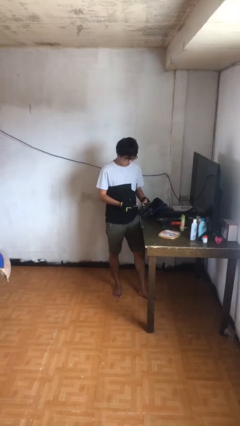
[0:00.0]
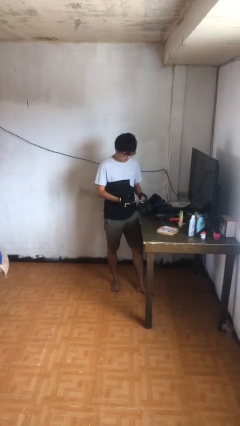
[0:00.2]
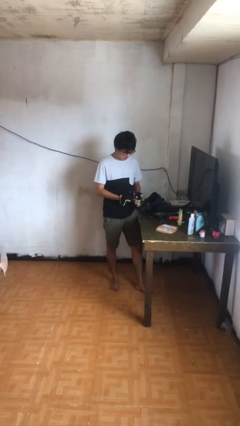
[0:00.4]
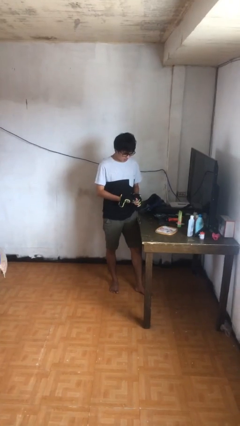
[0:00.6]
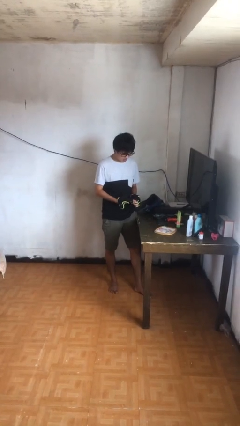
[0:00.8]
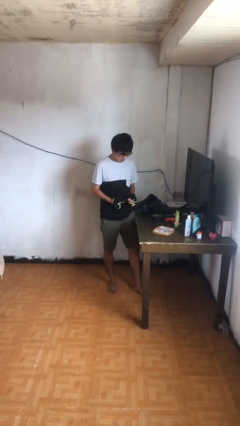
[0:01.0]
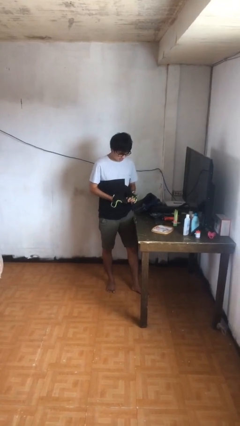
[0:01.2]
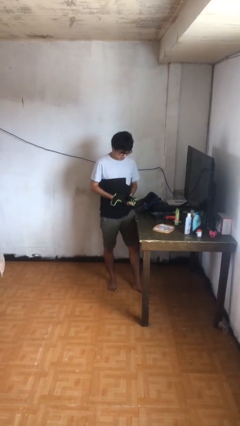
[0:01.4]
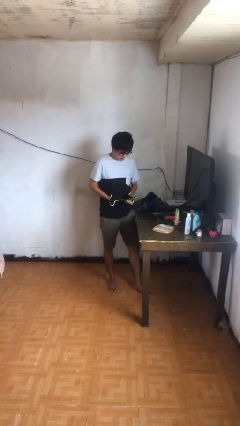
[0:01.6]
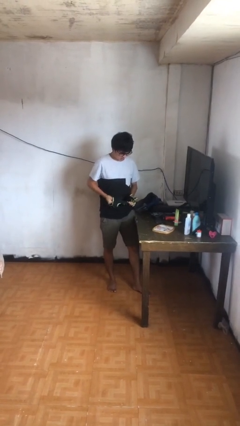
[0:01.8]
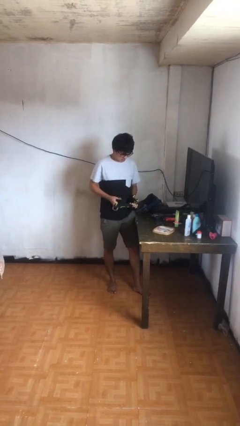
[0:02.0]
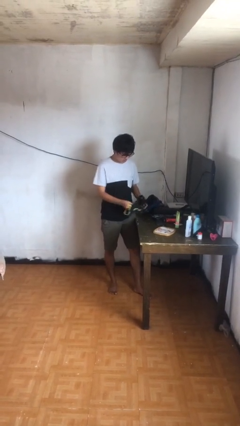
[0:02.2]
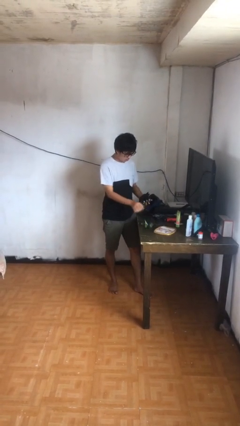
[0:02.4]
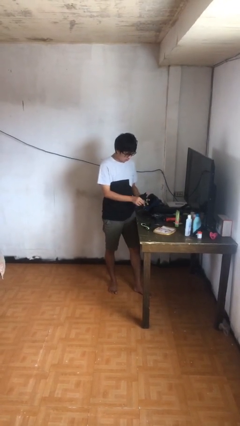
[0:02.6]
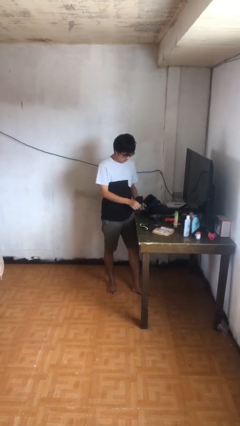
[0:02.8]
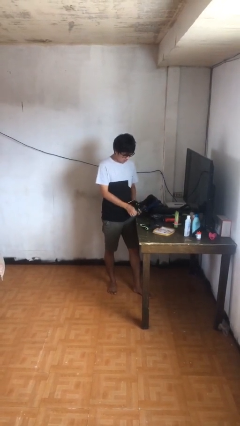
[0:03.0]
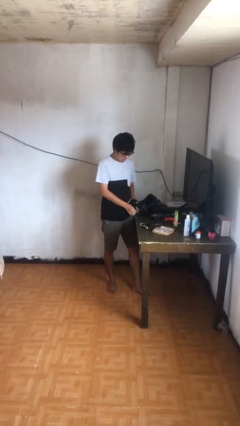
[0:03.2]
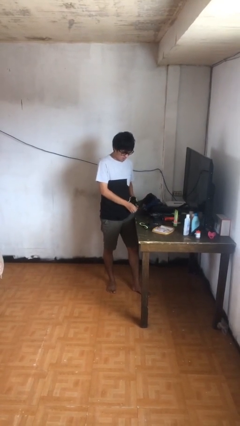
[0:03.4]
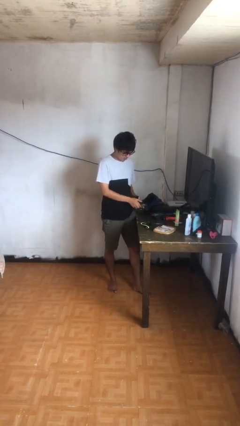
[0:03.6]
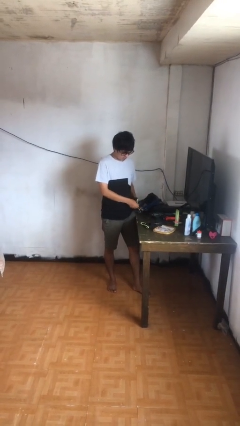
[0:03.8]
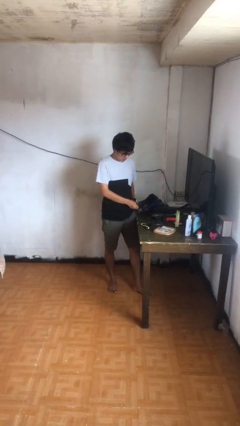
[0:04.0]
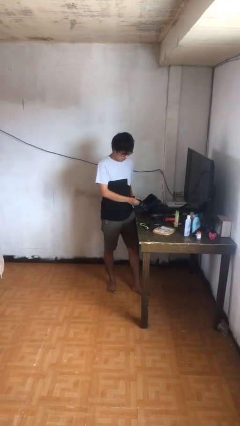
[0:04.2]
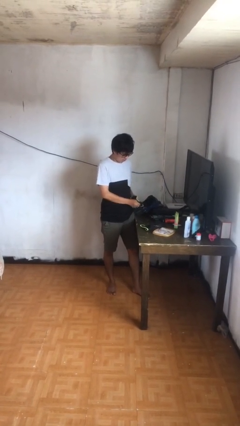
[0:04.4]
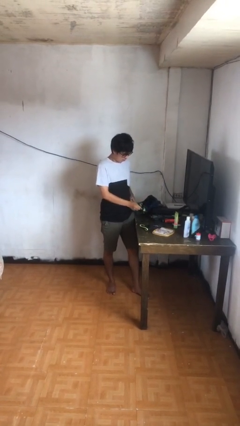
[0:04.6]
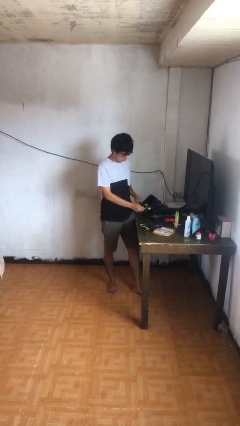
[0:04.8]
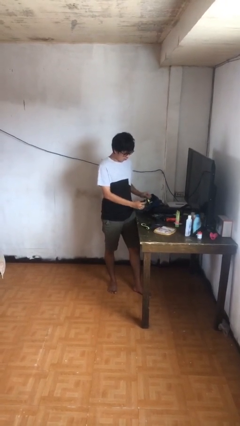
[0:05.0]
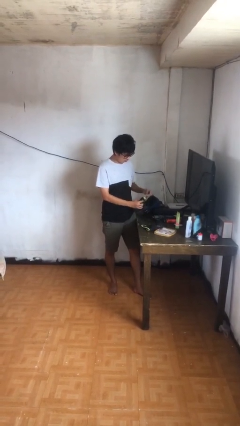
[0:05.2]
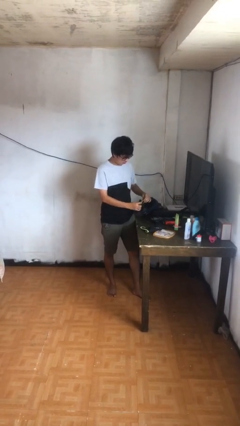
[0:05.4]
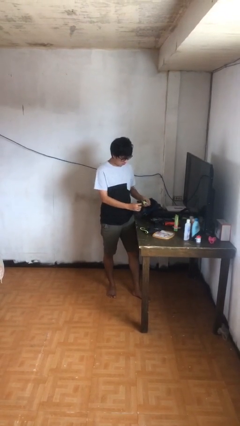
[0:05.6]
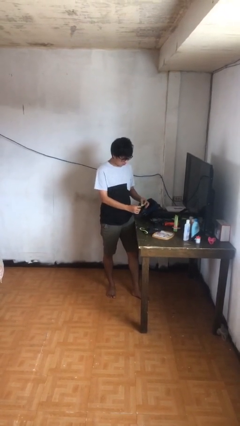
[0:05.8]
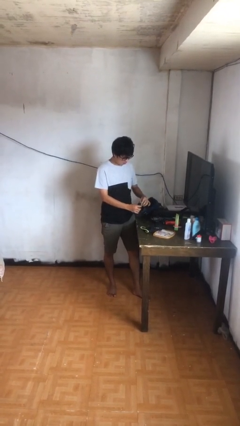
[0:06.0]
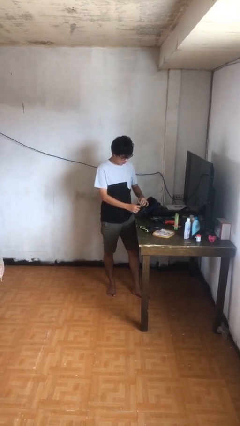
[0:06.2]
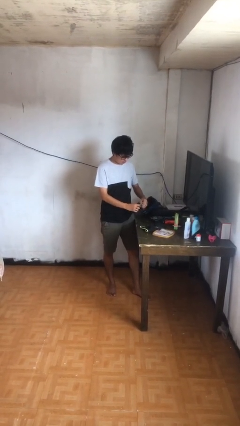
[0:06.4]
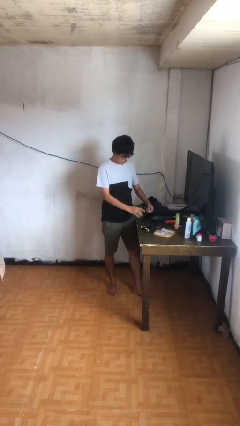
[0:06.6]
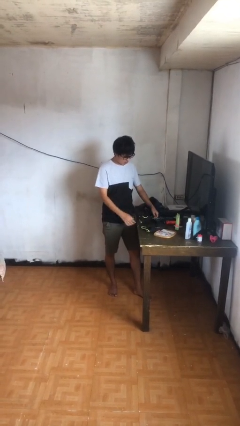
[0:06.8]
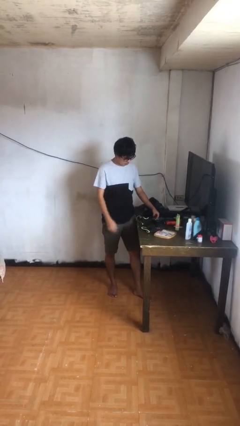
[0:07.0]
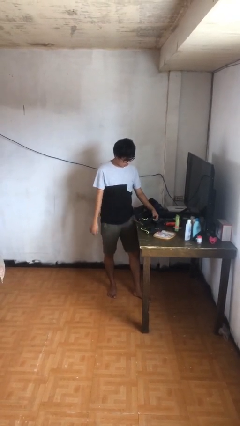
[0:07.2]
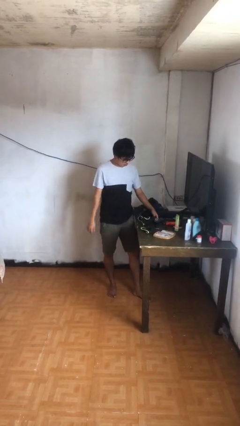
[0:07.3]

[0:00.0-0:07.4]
person takes off gloves

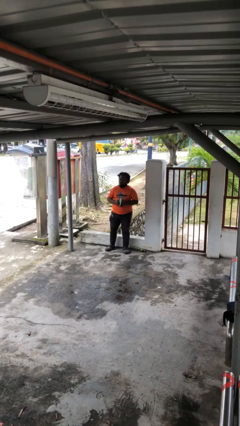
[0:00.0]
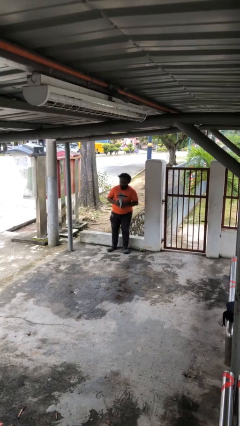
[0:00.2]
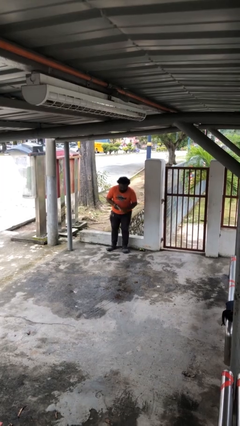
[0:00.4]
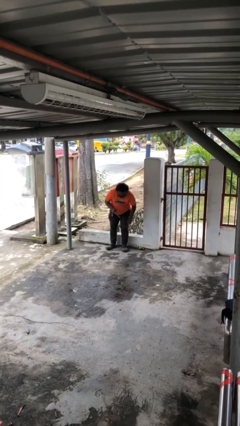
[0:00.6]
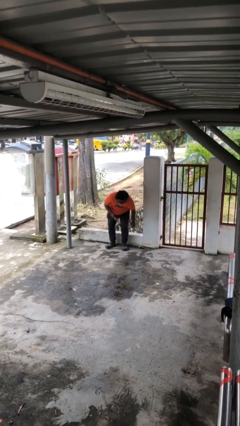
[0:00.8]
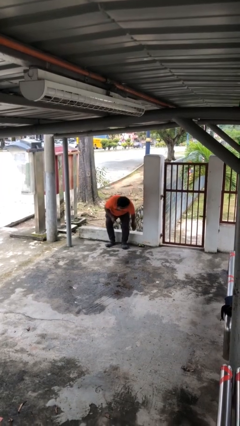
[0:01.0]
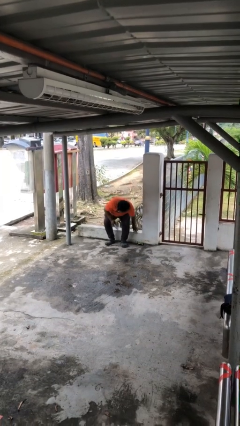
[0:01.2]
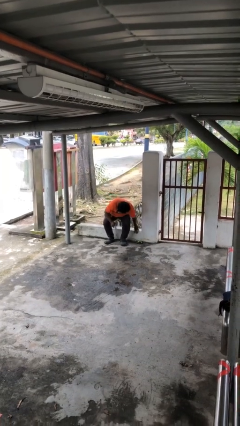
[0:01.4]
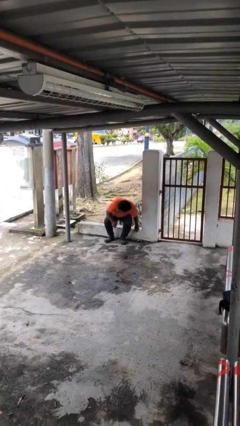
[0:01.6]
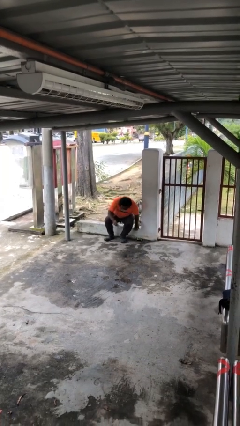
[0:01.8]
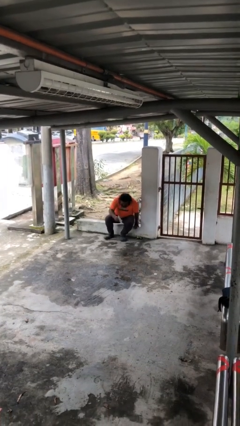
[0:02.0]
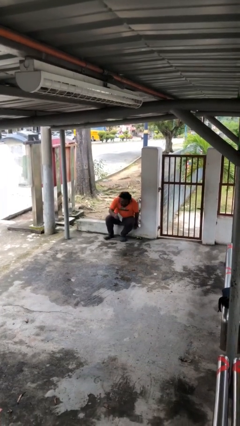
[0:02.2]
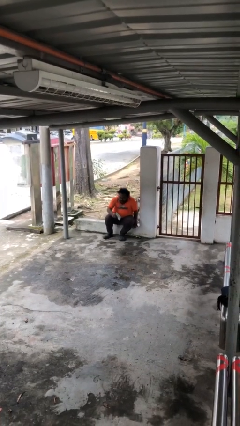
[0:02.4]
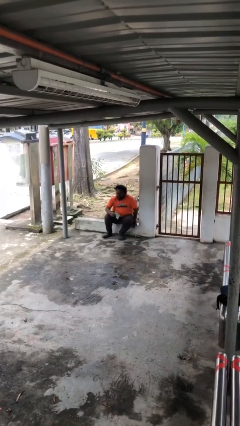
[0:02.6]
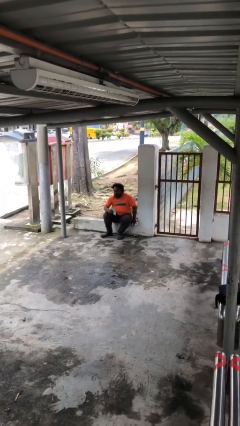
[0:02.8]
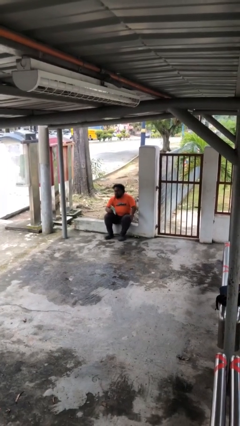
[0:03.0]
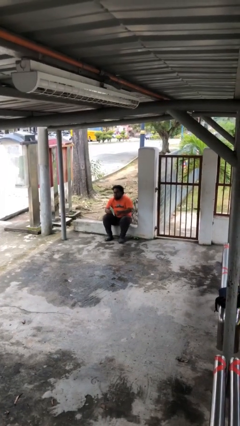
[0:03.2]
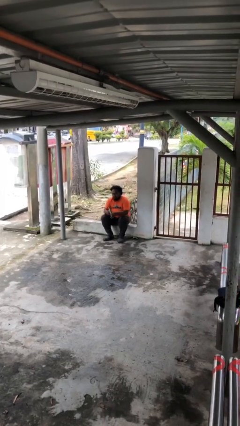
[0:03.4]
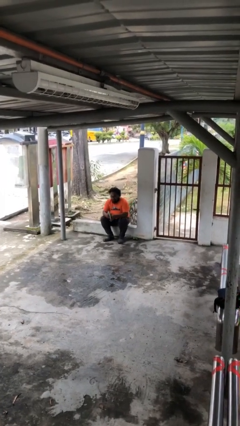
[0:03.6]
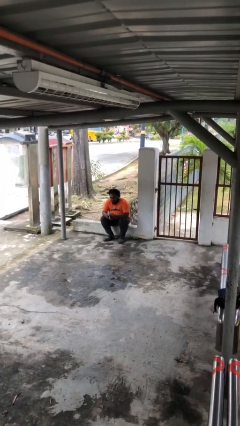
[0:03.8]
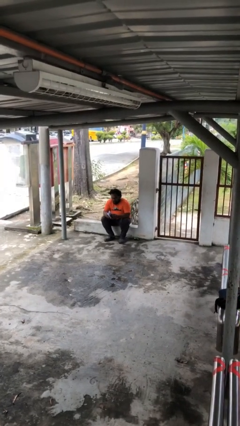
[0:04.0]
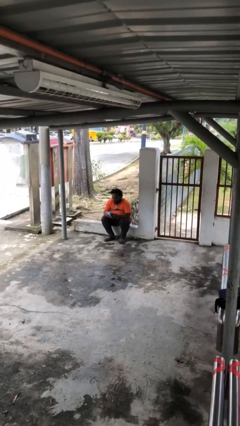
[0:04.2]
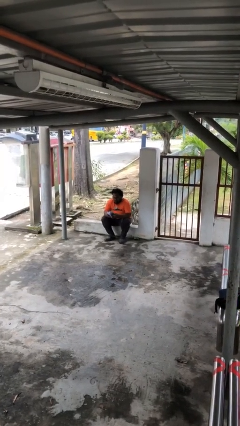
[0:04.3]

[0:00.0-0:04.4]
person sits down

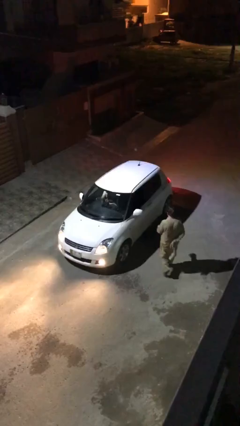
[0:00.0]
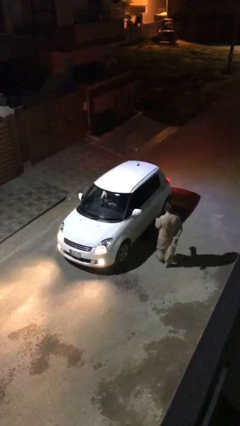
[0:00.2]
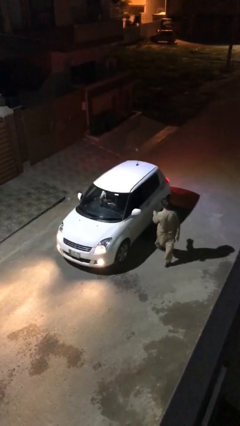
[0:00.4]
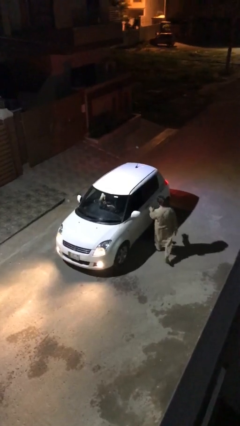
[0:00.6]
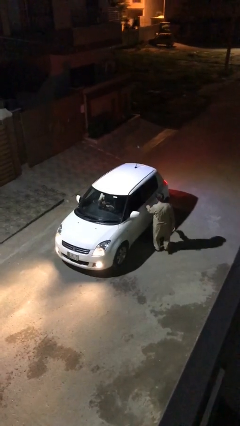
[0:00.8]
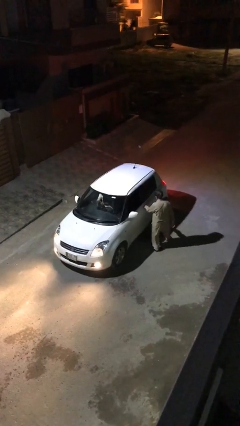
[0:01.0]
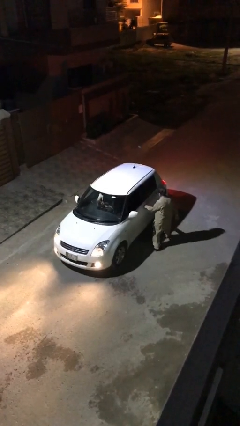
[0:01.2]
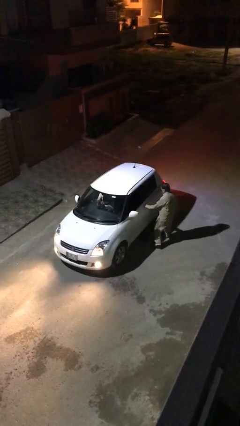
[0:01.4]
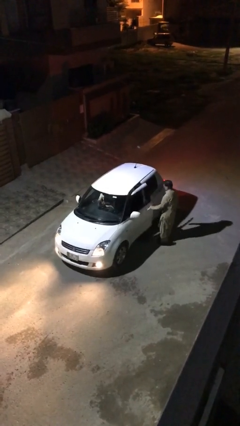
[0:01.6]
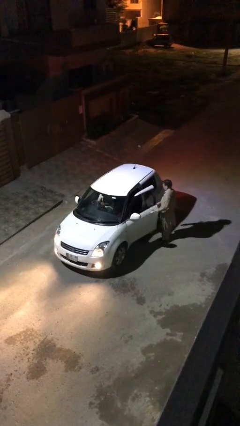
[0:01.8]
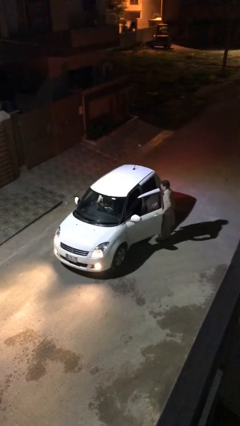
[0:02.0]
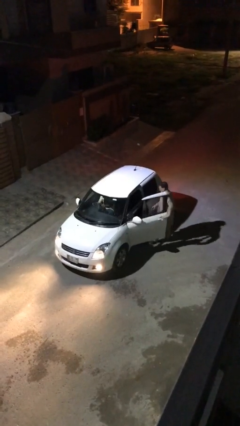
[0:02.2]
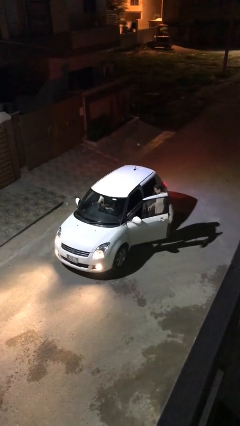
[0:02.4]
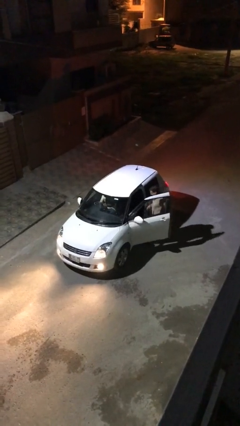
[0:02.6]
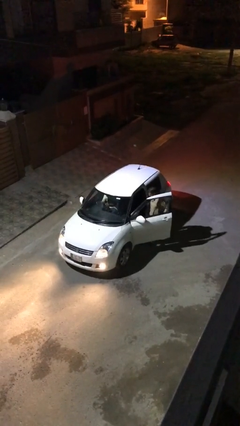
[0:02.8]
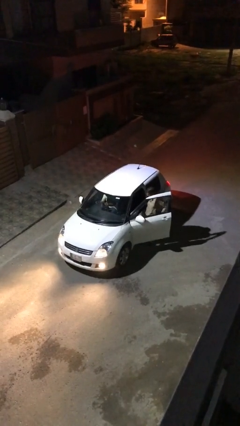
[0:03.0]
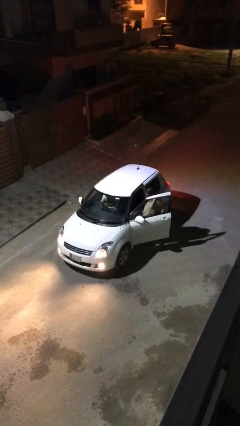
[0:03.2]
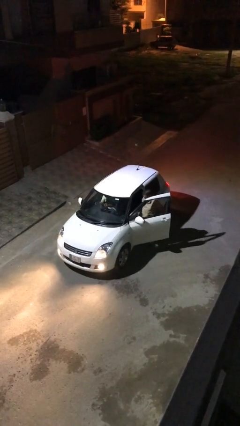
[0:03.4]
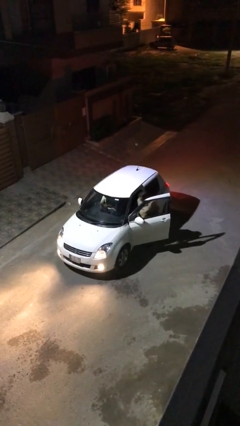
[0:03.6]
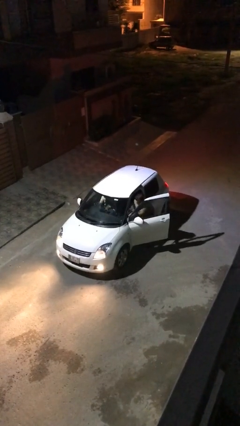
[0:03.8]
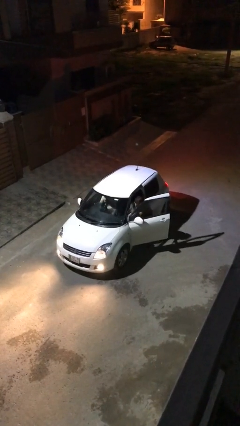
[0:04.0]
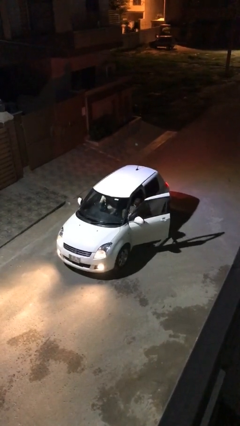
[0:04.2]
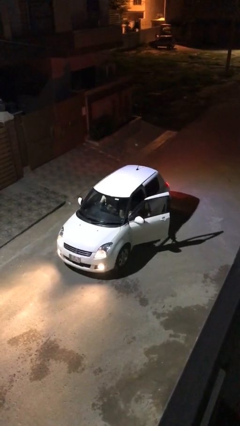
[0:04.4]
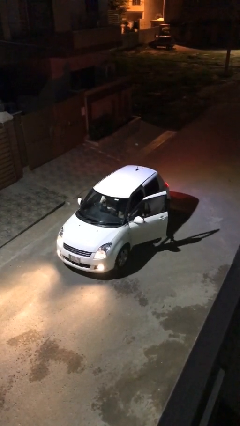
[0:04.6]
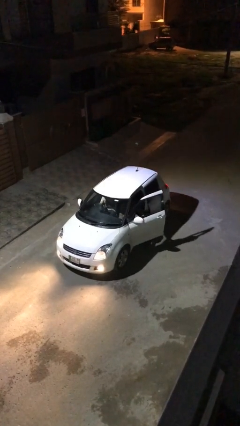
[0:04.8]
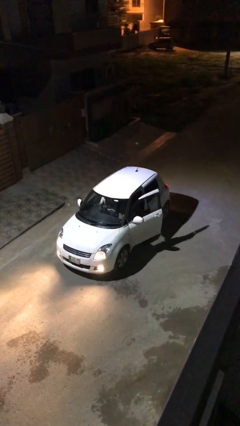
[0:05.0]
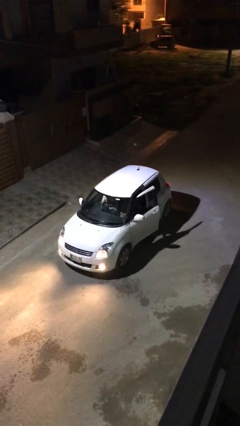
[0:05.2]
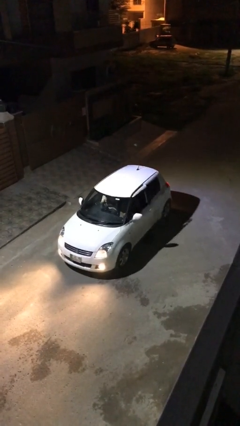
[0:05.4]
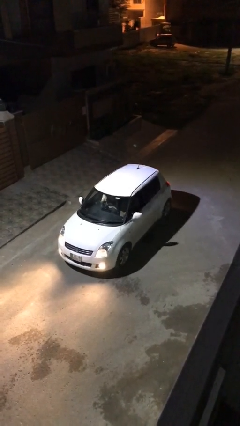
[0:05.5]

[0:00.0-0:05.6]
car picks up person

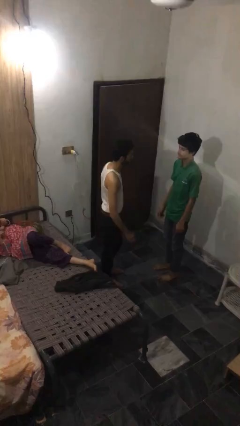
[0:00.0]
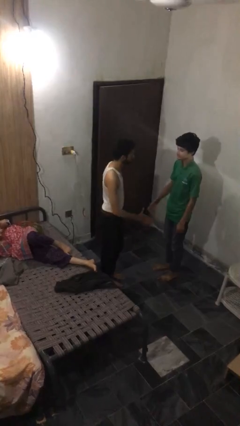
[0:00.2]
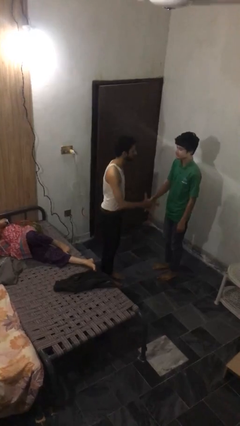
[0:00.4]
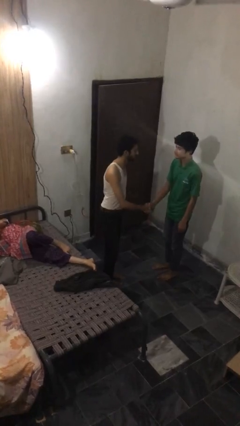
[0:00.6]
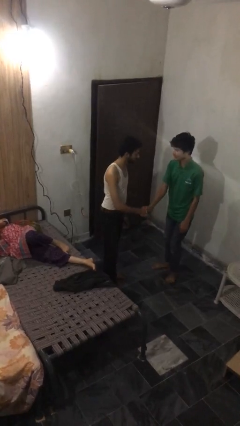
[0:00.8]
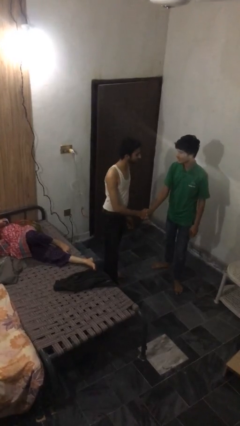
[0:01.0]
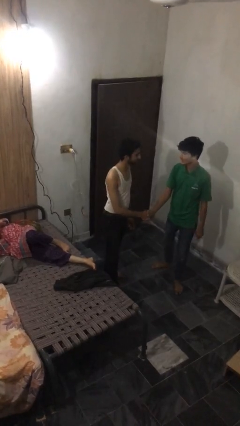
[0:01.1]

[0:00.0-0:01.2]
person shakes hand
